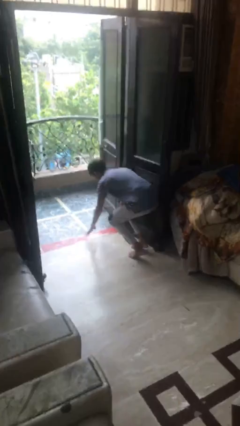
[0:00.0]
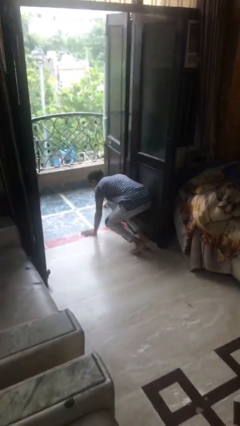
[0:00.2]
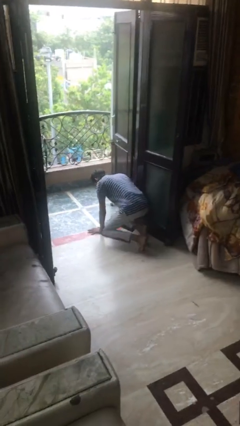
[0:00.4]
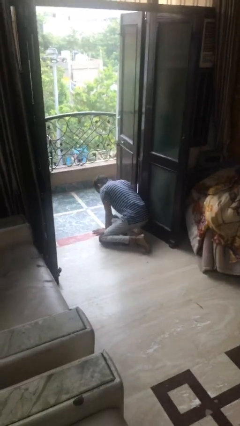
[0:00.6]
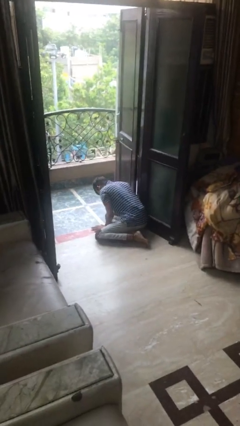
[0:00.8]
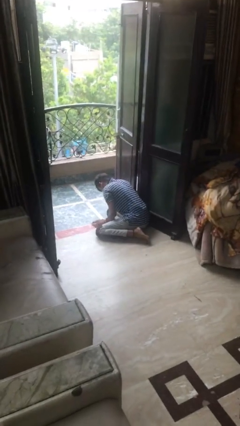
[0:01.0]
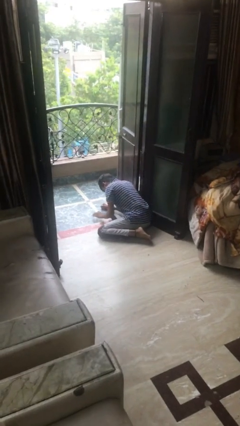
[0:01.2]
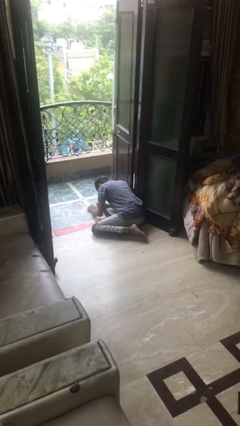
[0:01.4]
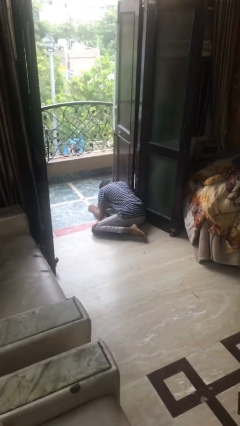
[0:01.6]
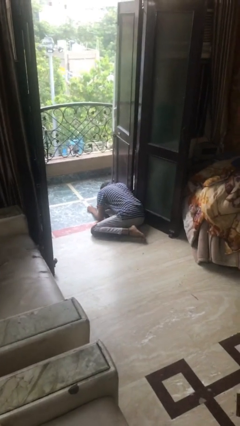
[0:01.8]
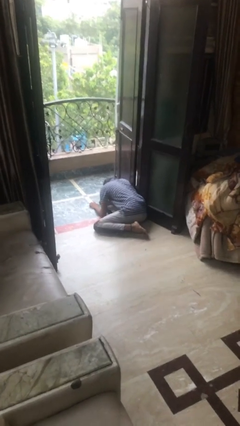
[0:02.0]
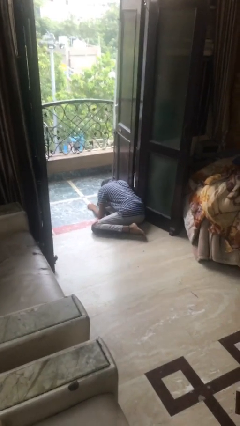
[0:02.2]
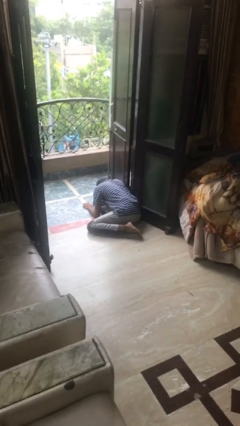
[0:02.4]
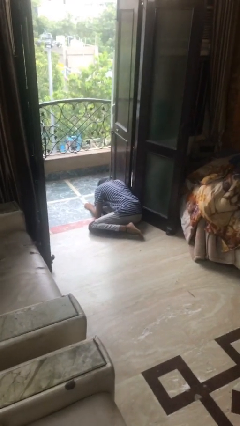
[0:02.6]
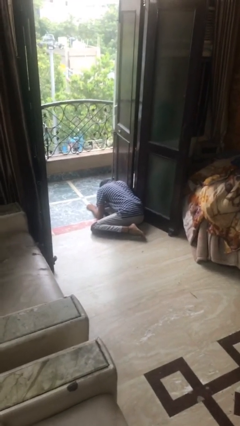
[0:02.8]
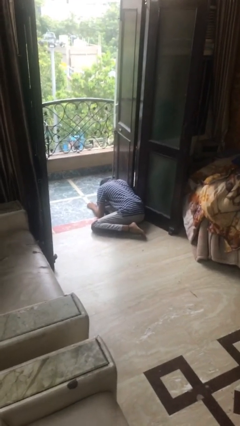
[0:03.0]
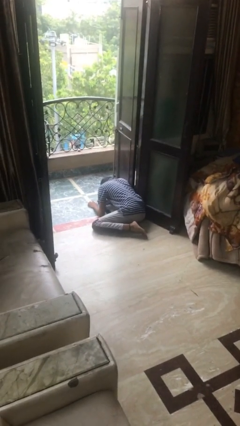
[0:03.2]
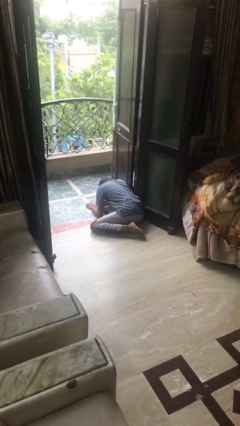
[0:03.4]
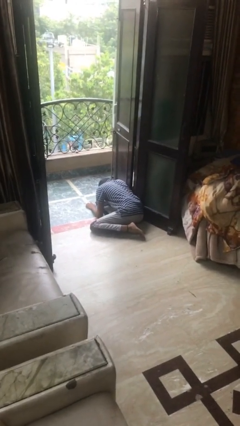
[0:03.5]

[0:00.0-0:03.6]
person lies down on floor

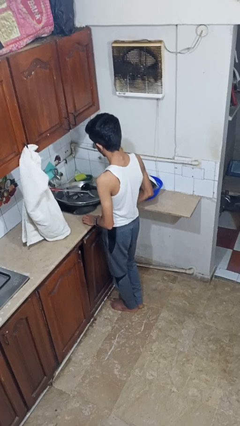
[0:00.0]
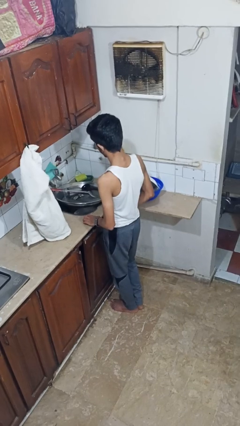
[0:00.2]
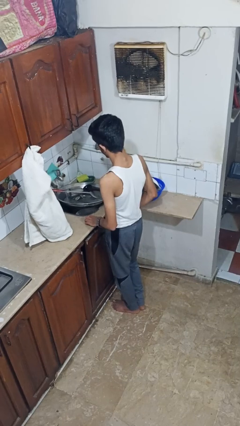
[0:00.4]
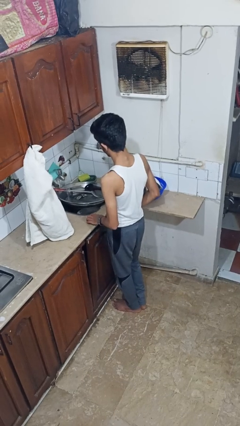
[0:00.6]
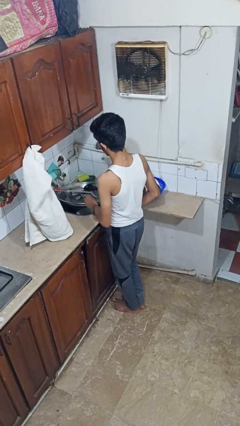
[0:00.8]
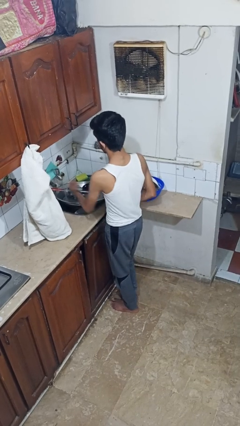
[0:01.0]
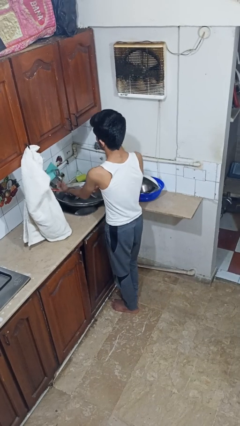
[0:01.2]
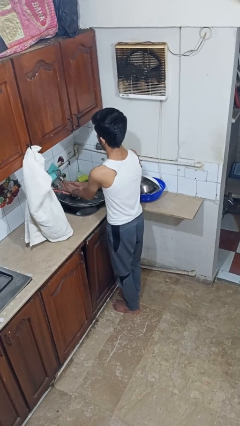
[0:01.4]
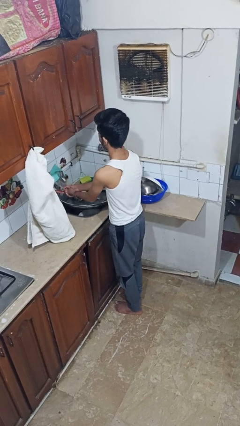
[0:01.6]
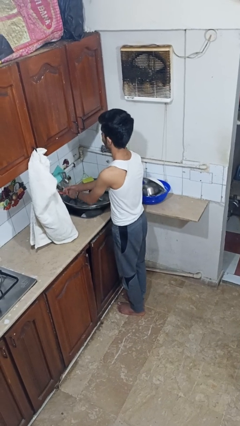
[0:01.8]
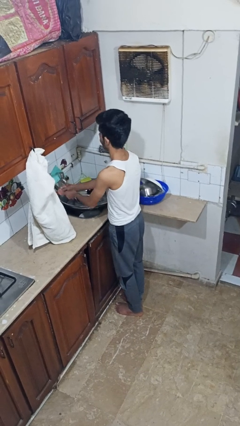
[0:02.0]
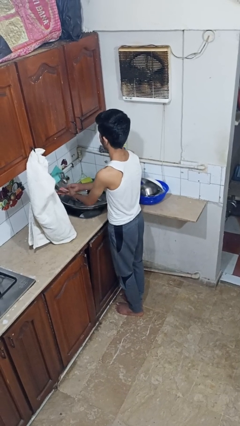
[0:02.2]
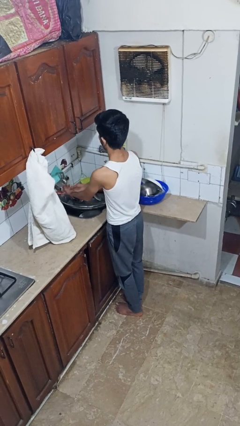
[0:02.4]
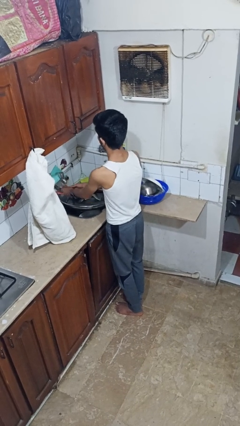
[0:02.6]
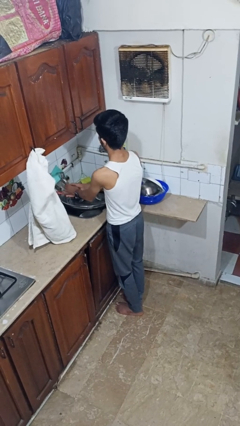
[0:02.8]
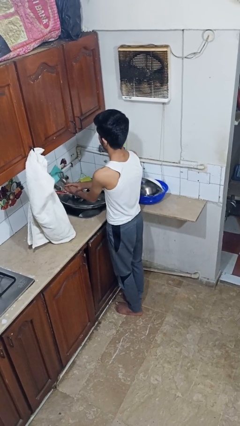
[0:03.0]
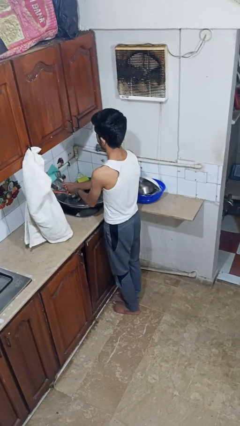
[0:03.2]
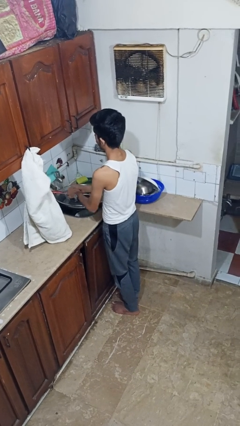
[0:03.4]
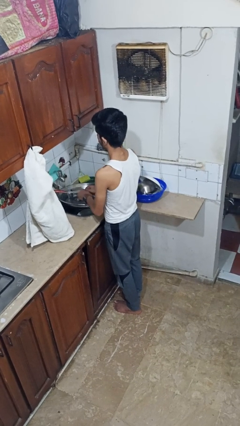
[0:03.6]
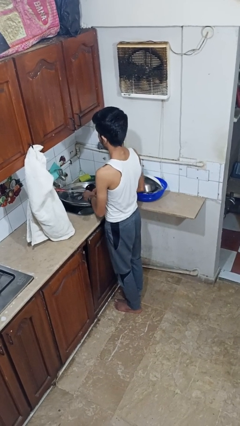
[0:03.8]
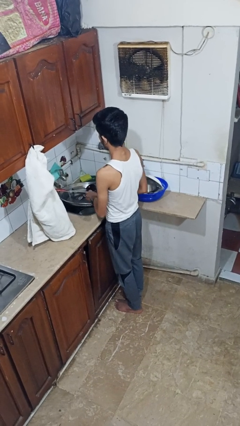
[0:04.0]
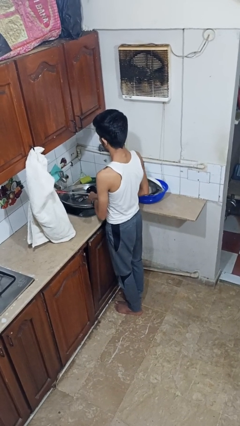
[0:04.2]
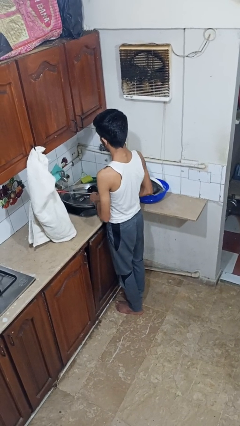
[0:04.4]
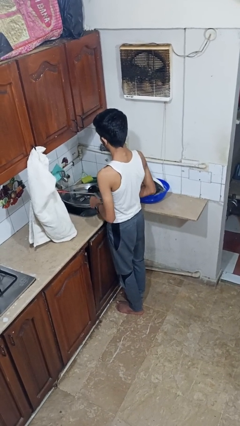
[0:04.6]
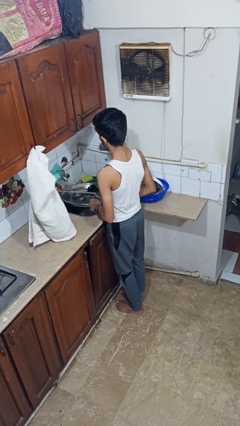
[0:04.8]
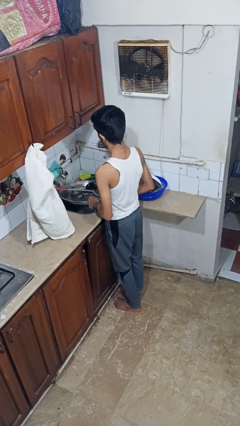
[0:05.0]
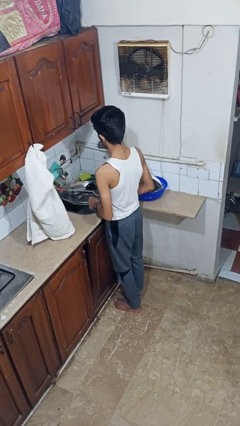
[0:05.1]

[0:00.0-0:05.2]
person washes hands

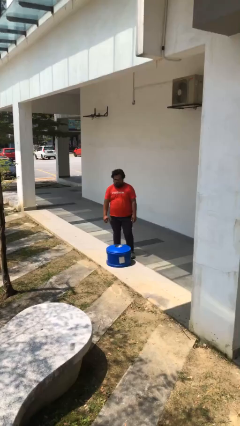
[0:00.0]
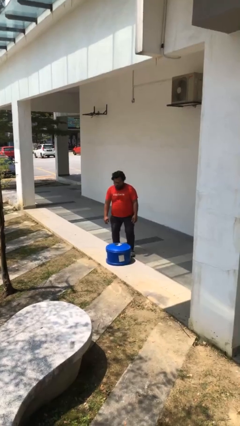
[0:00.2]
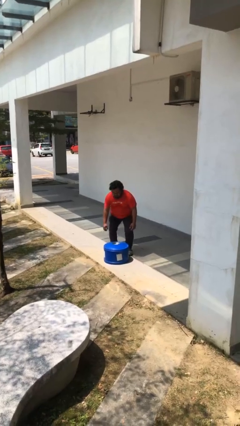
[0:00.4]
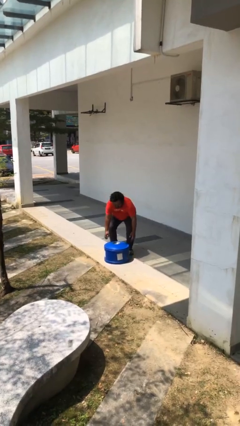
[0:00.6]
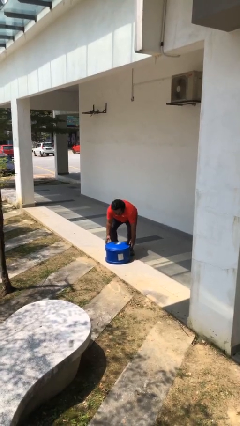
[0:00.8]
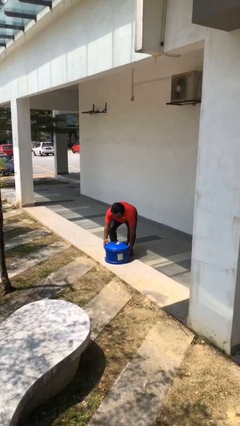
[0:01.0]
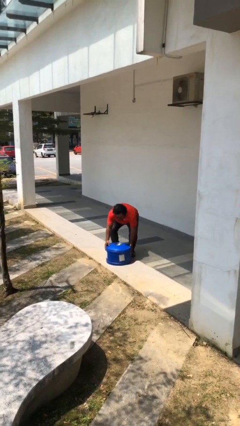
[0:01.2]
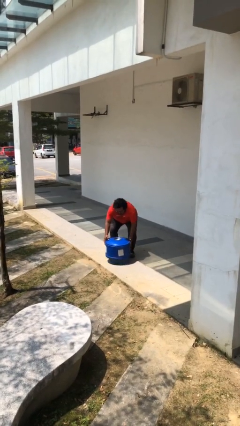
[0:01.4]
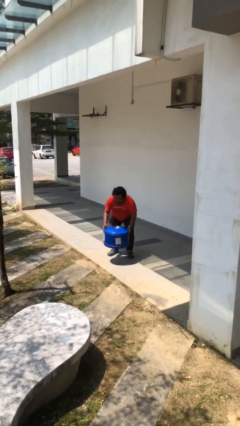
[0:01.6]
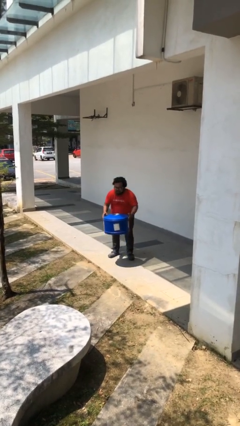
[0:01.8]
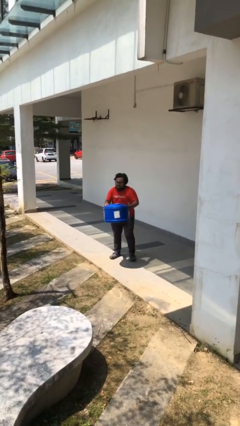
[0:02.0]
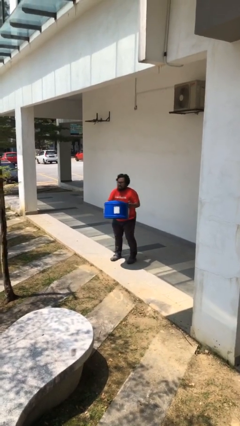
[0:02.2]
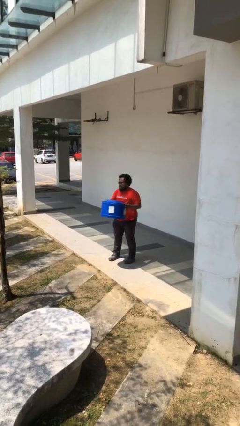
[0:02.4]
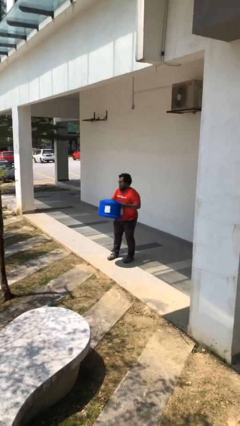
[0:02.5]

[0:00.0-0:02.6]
person picks up object from floor

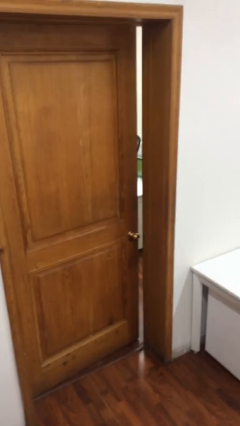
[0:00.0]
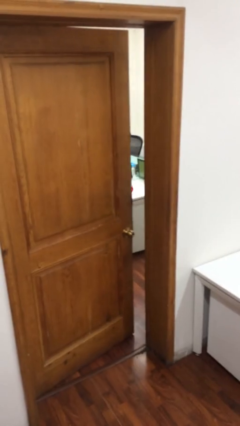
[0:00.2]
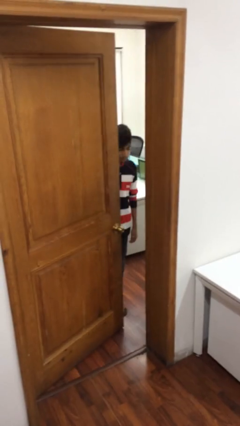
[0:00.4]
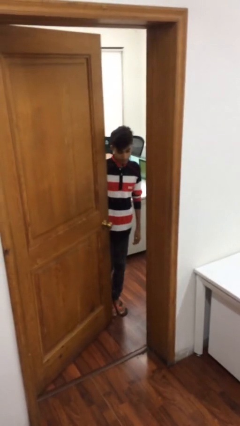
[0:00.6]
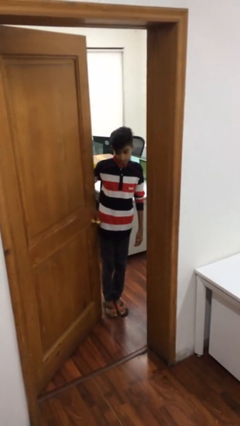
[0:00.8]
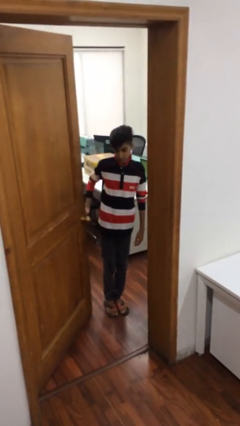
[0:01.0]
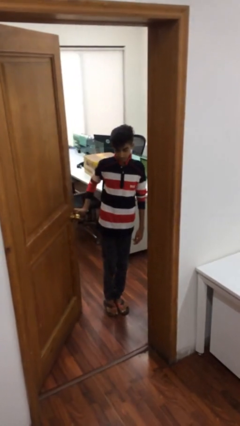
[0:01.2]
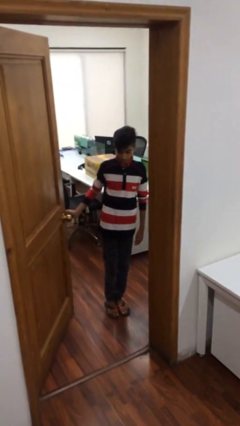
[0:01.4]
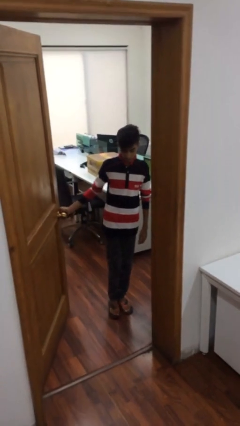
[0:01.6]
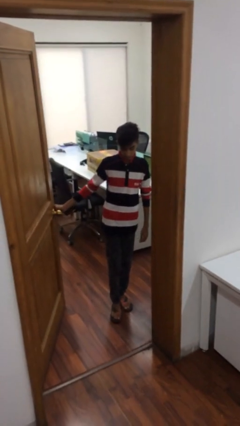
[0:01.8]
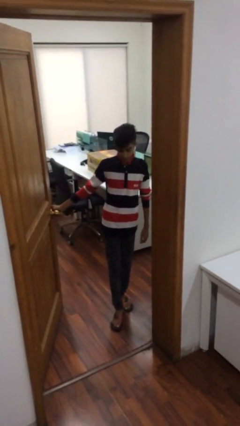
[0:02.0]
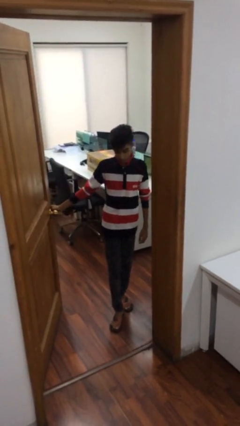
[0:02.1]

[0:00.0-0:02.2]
person opens facility door

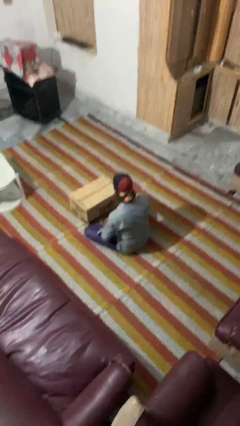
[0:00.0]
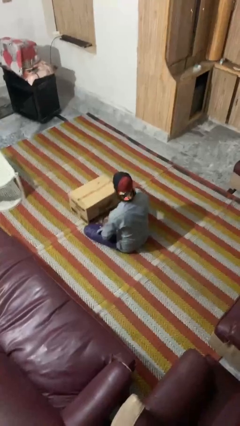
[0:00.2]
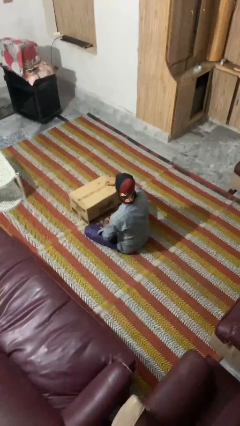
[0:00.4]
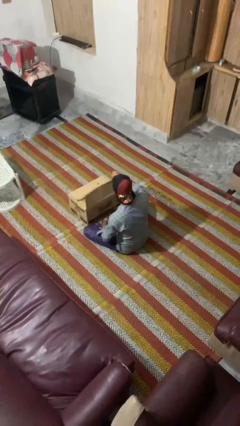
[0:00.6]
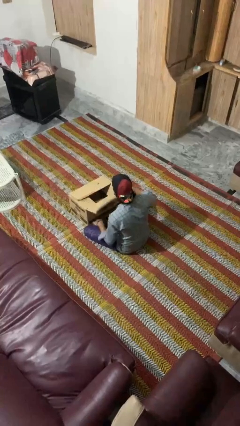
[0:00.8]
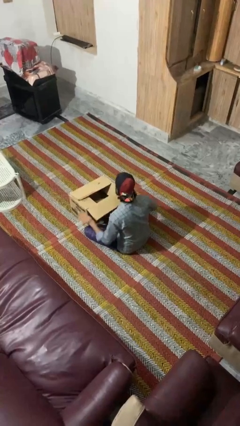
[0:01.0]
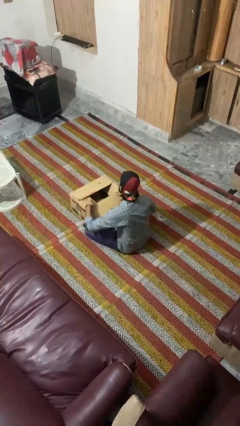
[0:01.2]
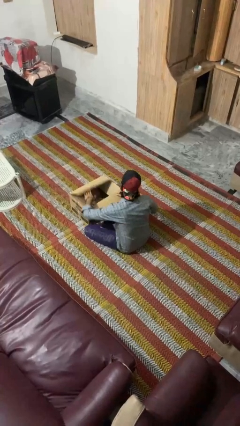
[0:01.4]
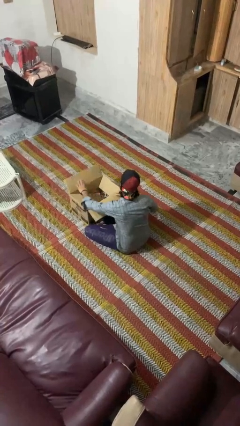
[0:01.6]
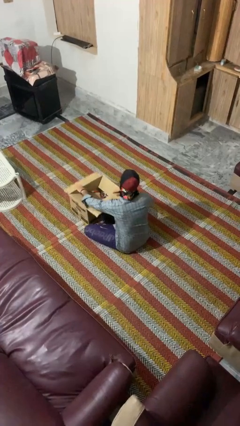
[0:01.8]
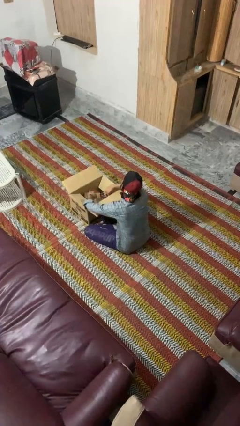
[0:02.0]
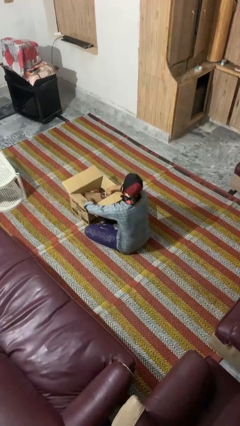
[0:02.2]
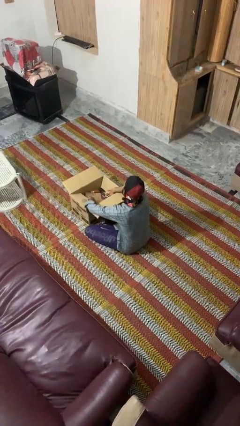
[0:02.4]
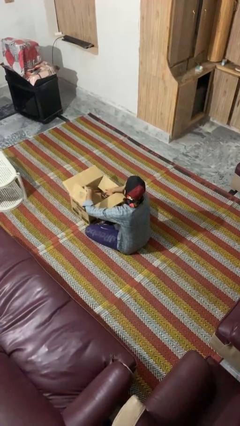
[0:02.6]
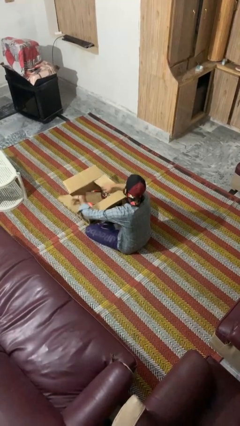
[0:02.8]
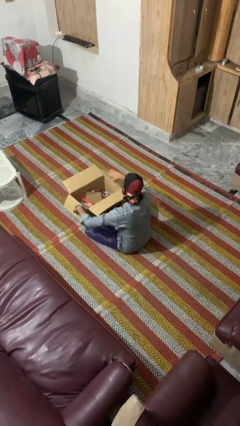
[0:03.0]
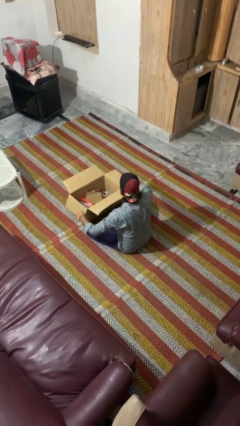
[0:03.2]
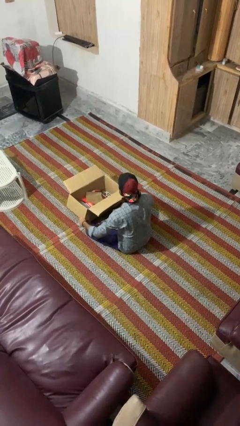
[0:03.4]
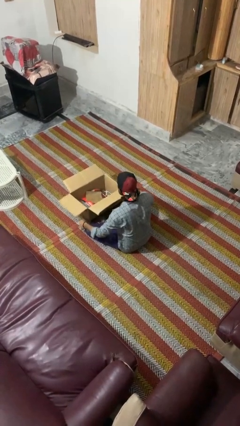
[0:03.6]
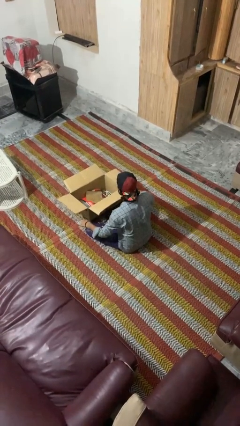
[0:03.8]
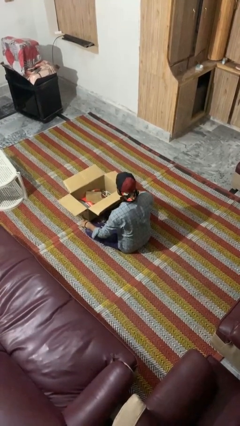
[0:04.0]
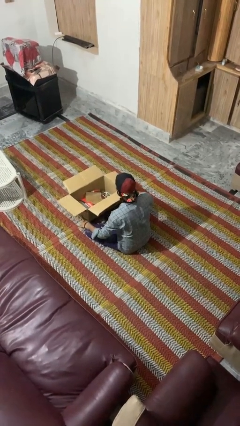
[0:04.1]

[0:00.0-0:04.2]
person opens box
